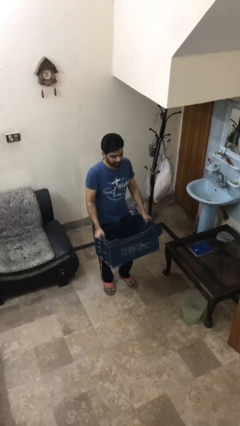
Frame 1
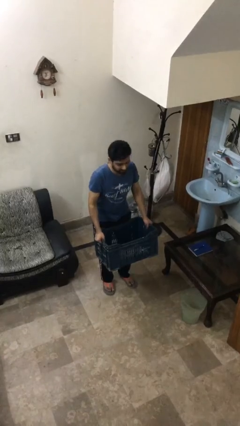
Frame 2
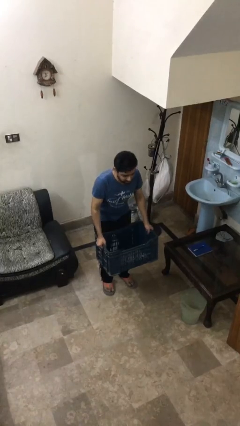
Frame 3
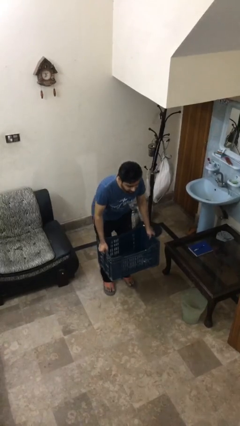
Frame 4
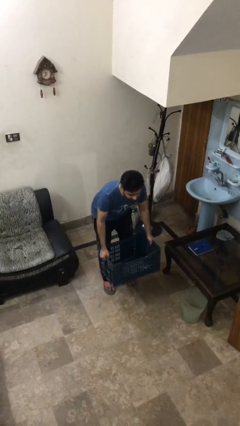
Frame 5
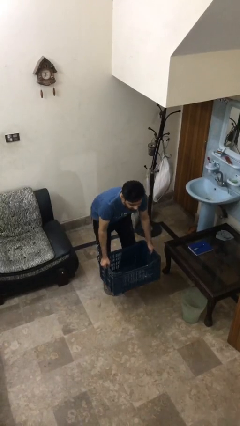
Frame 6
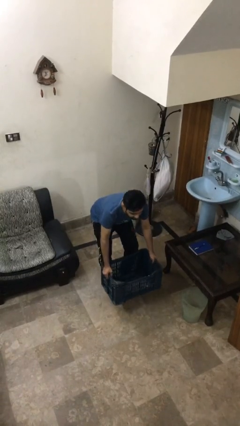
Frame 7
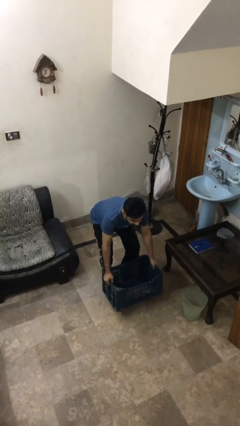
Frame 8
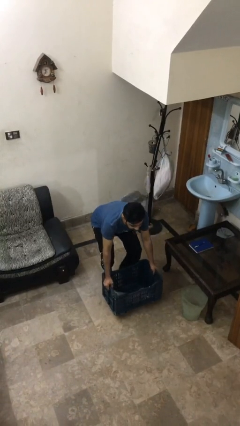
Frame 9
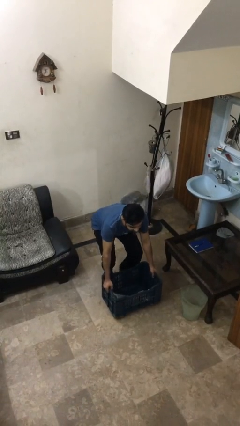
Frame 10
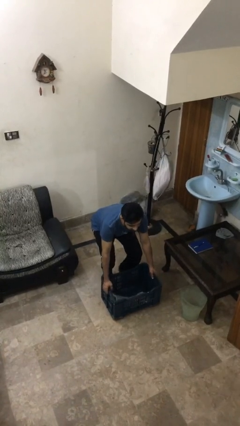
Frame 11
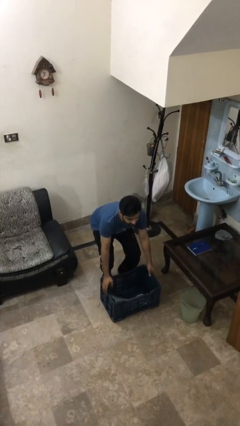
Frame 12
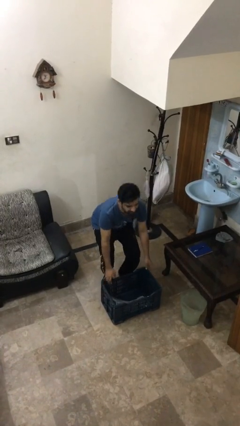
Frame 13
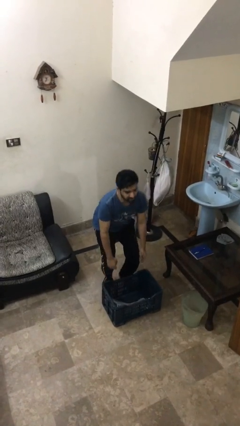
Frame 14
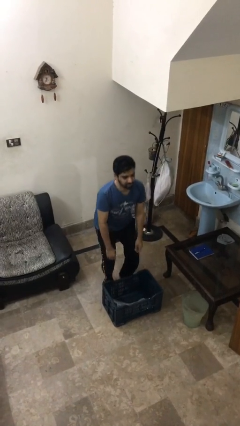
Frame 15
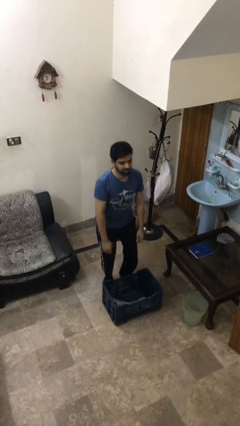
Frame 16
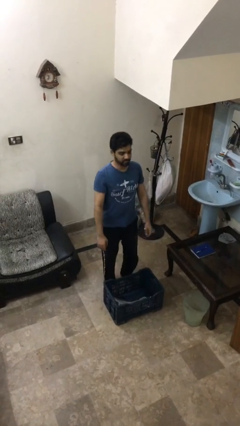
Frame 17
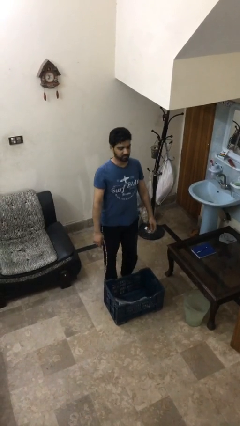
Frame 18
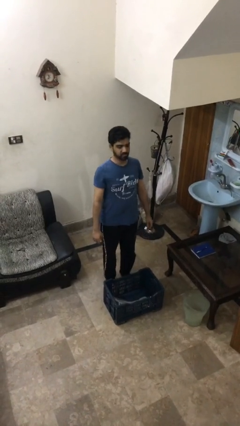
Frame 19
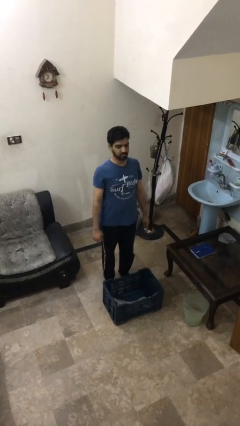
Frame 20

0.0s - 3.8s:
person puts down object on floor

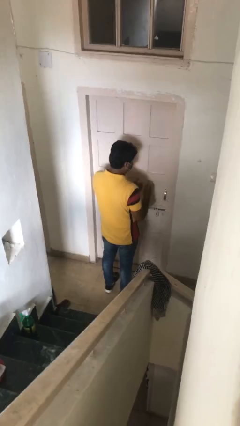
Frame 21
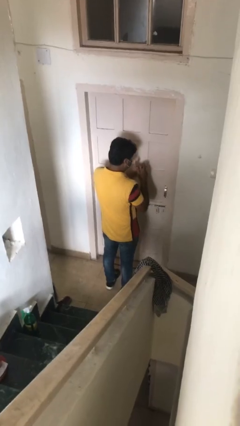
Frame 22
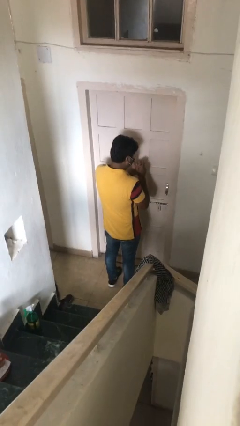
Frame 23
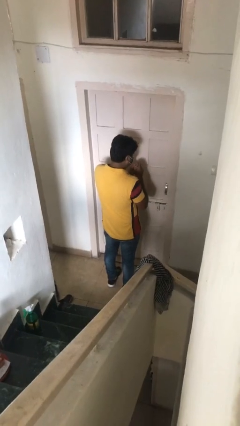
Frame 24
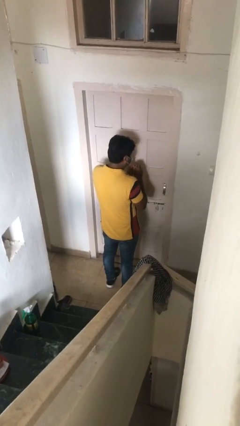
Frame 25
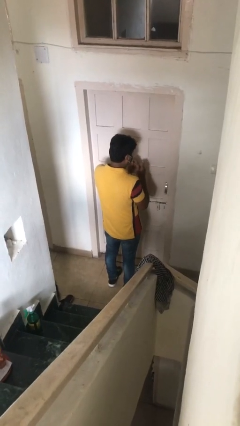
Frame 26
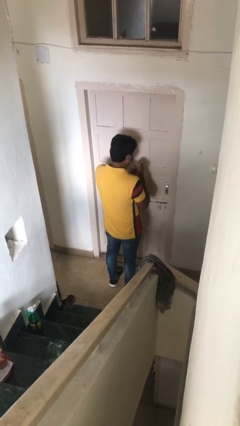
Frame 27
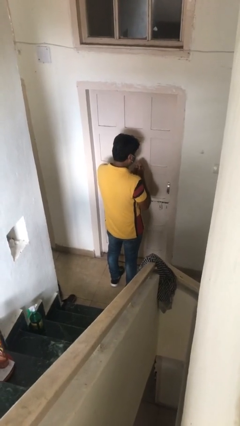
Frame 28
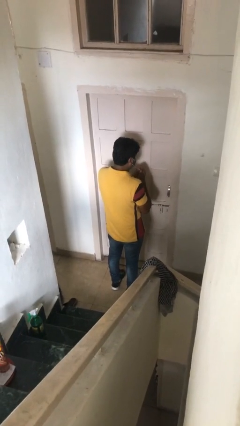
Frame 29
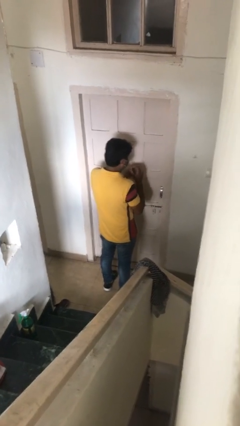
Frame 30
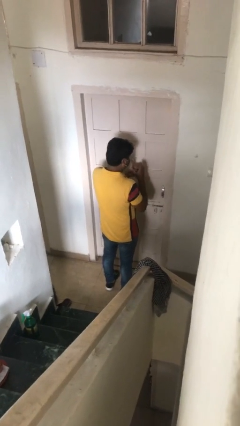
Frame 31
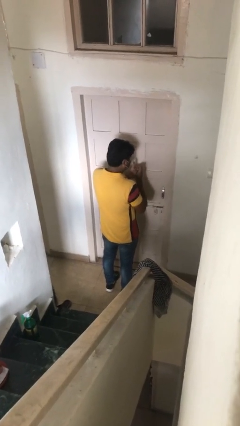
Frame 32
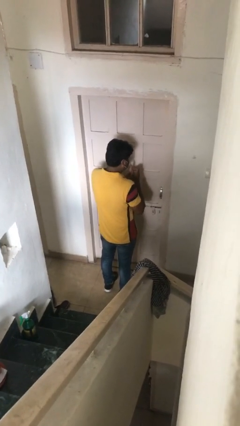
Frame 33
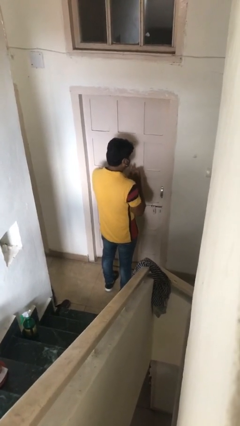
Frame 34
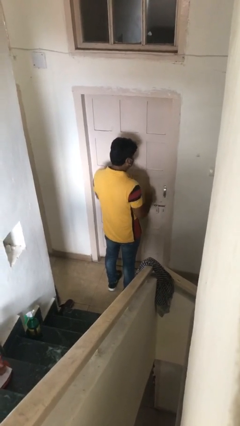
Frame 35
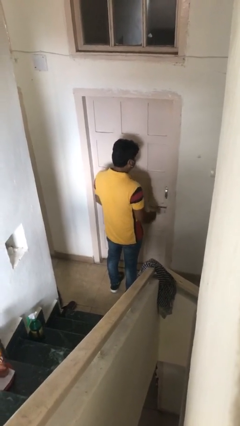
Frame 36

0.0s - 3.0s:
person cracks knuckles

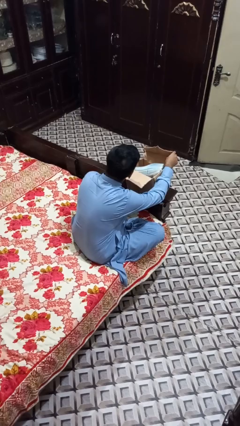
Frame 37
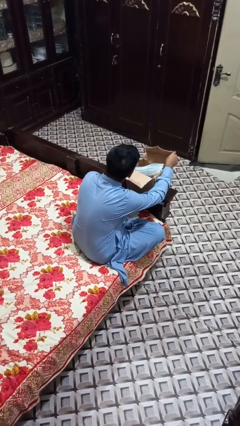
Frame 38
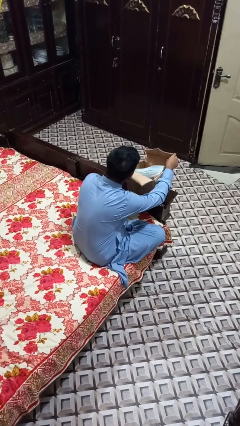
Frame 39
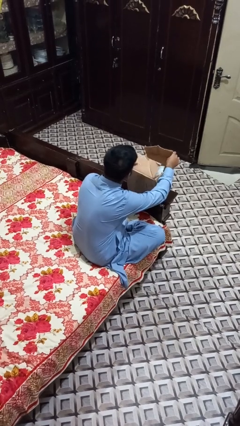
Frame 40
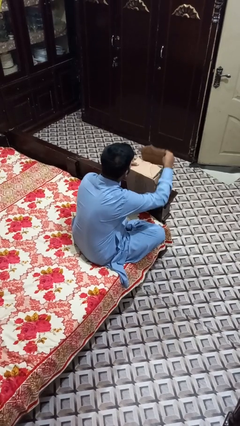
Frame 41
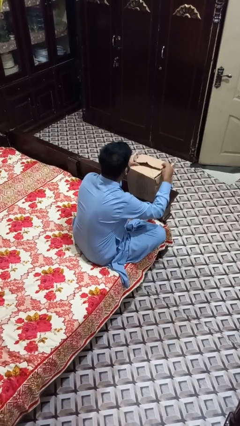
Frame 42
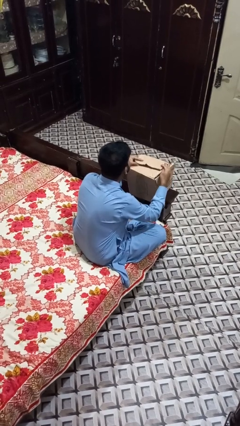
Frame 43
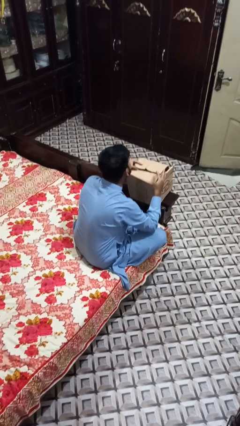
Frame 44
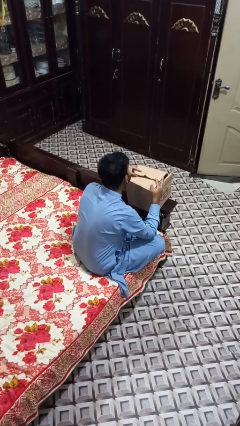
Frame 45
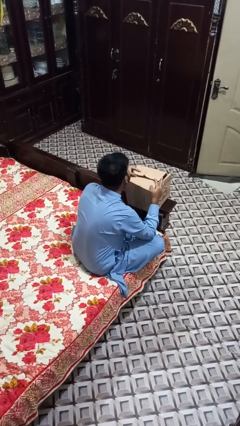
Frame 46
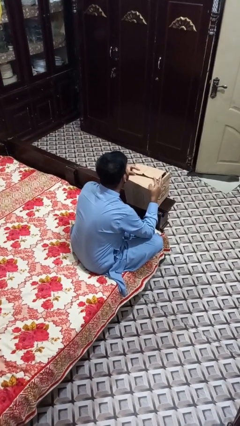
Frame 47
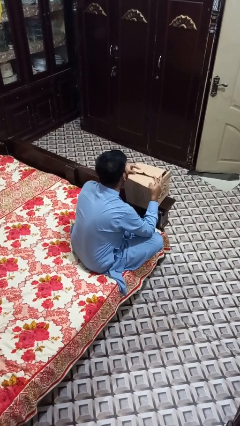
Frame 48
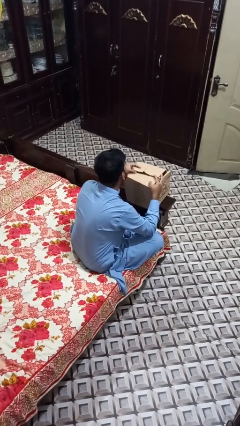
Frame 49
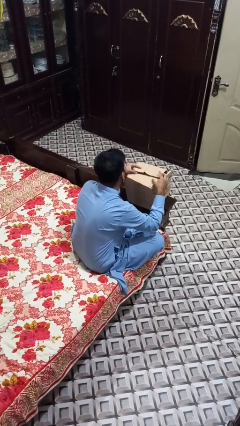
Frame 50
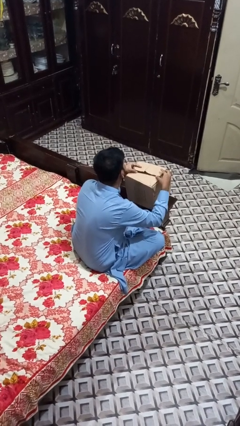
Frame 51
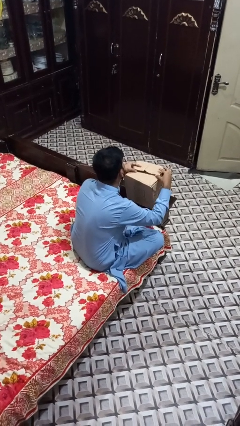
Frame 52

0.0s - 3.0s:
person closes box

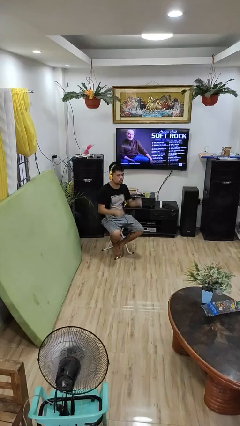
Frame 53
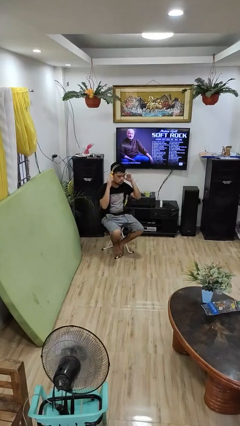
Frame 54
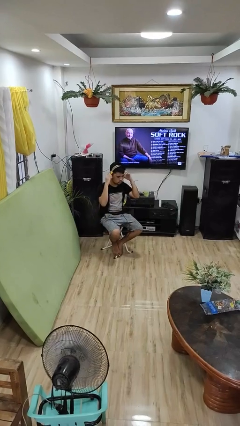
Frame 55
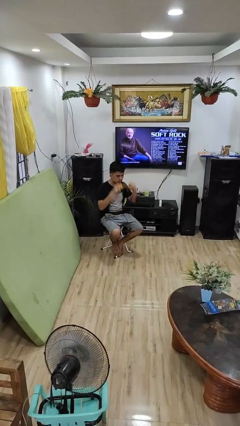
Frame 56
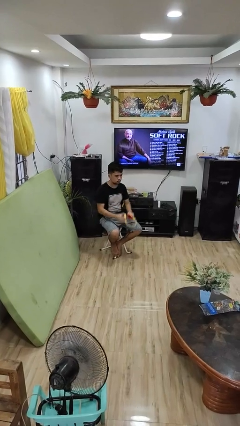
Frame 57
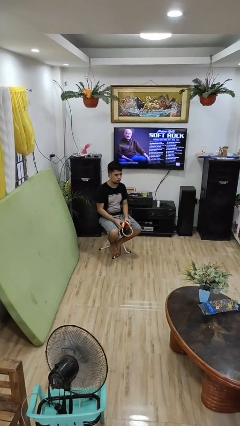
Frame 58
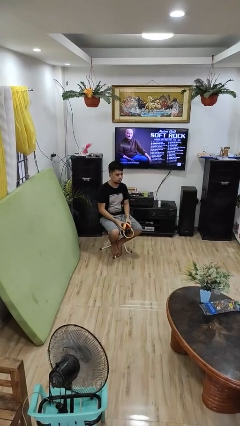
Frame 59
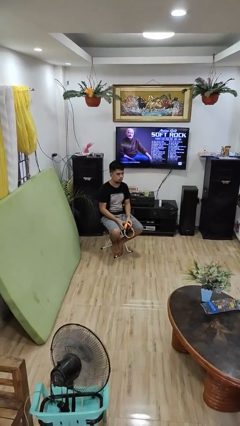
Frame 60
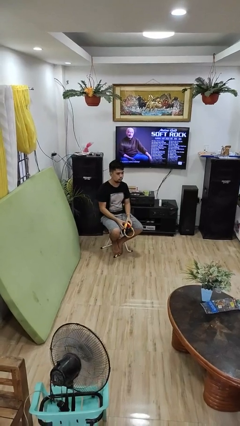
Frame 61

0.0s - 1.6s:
person takes off headphones

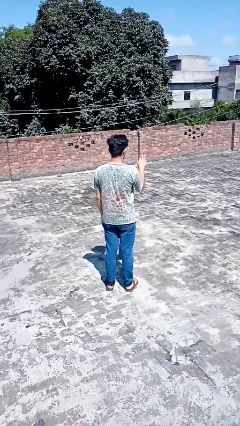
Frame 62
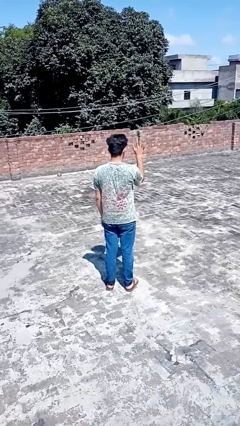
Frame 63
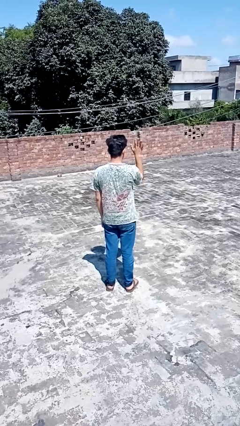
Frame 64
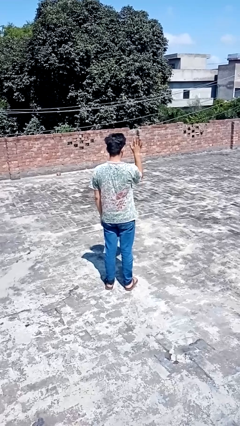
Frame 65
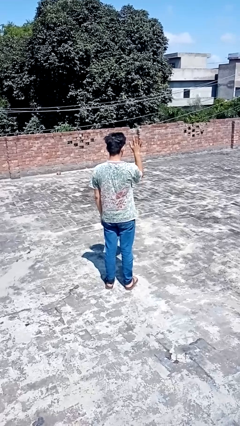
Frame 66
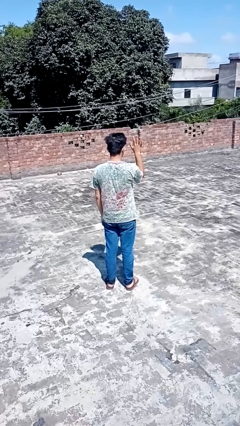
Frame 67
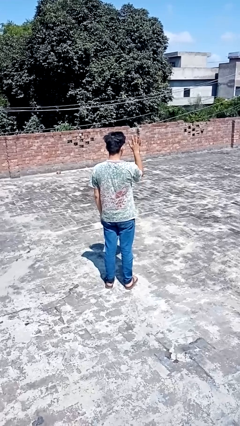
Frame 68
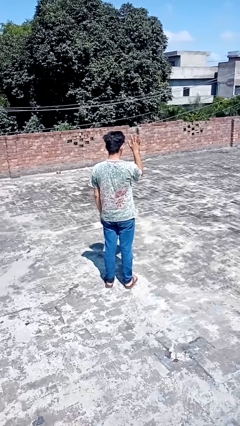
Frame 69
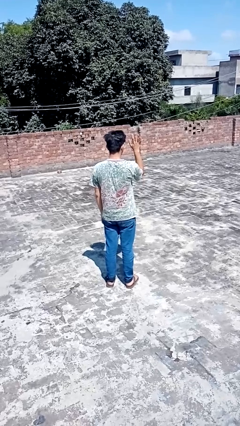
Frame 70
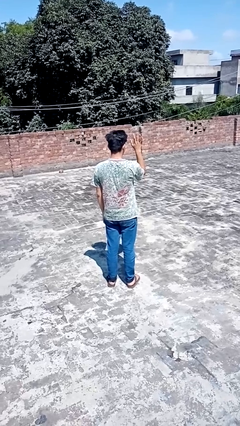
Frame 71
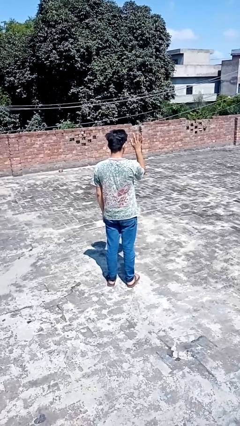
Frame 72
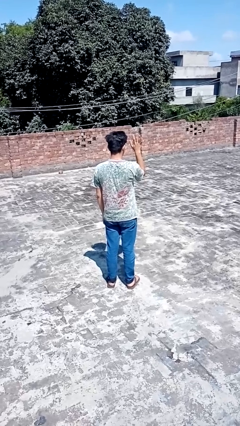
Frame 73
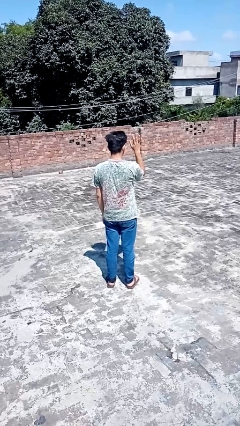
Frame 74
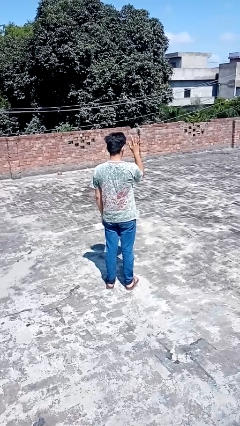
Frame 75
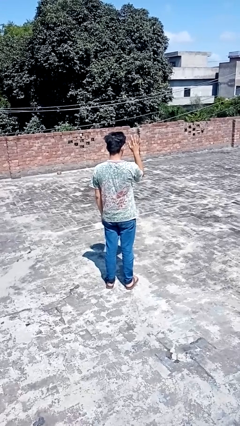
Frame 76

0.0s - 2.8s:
person gestures number five

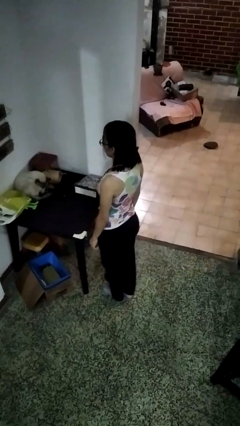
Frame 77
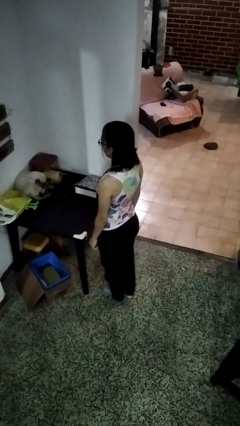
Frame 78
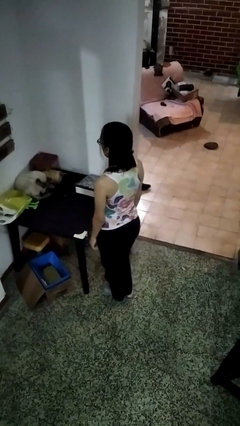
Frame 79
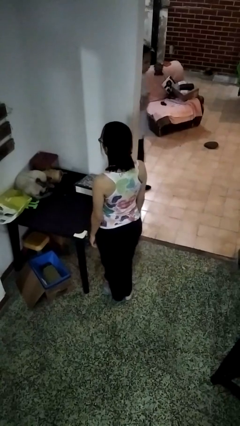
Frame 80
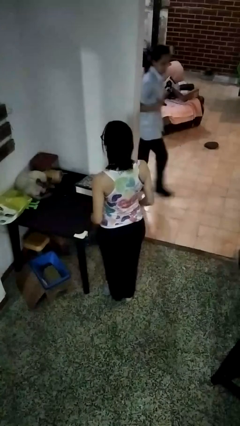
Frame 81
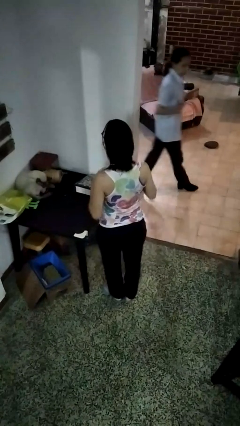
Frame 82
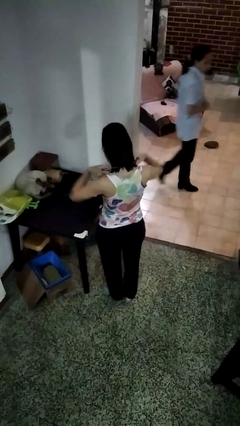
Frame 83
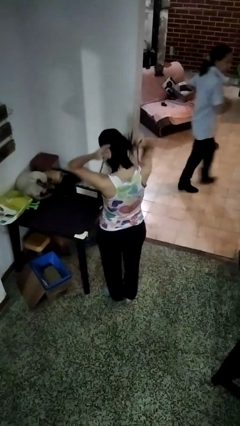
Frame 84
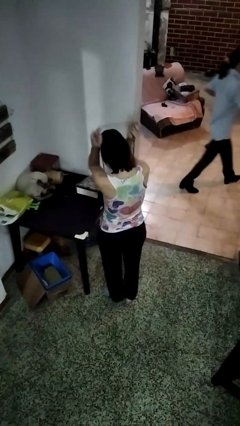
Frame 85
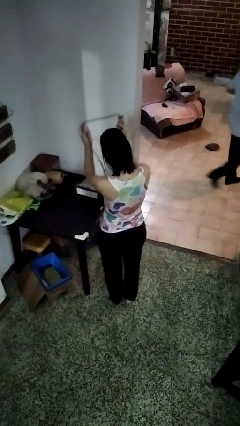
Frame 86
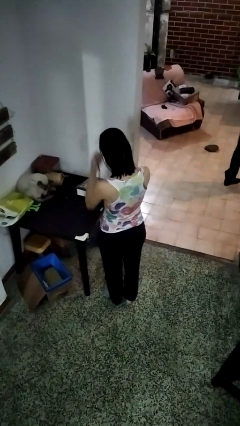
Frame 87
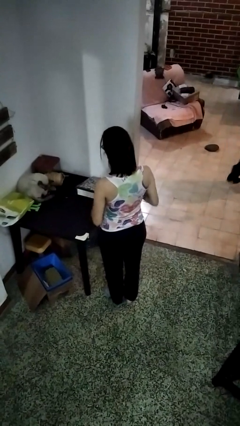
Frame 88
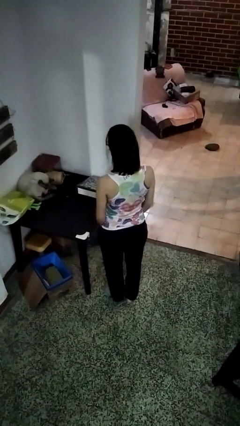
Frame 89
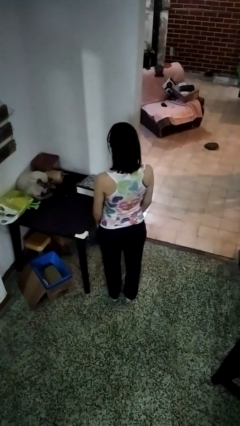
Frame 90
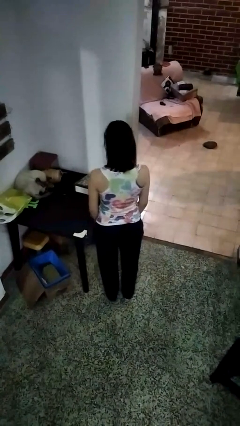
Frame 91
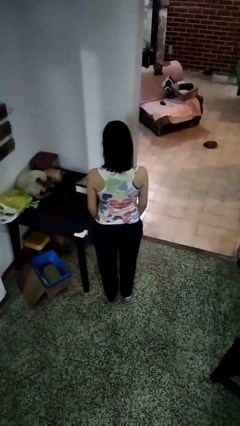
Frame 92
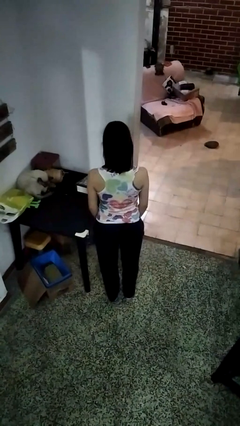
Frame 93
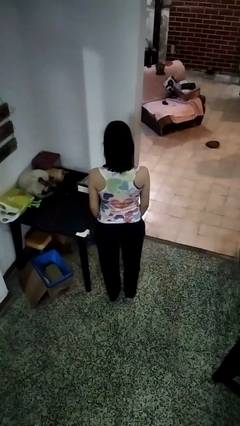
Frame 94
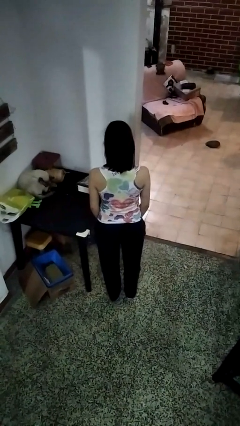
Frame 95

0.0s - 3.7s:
person takes off necklace
